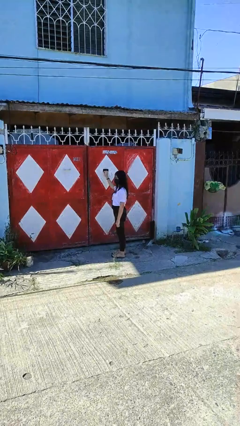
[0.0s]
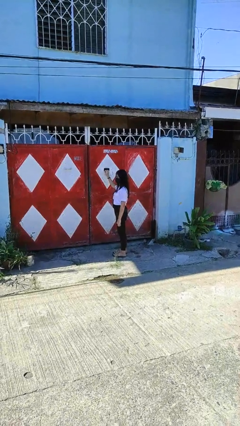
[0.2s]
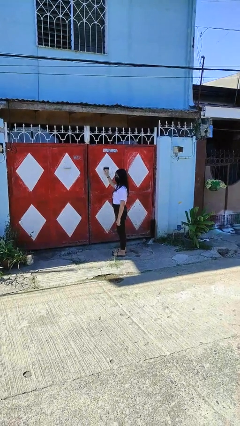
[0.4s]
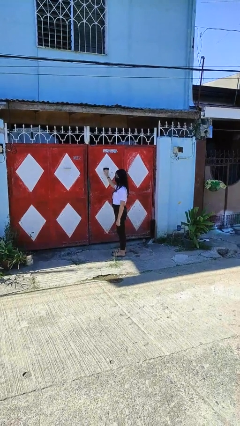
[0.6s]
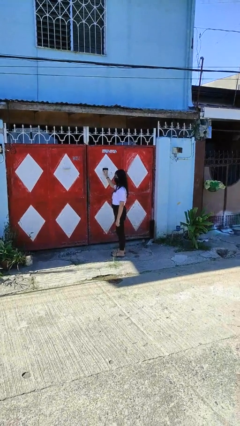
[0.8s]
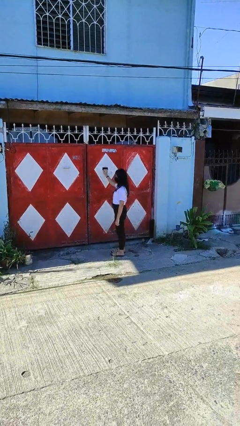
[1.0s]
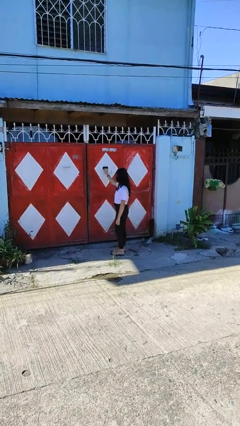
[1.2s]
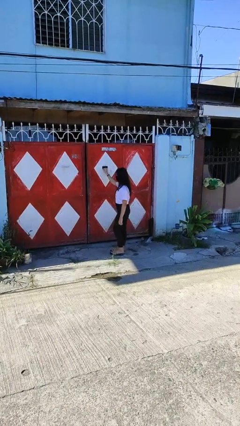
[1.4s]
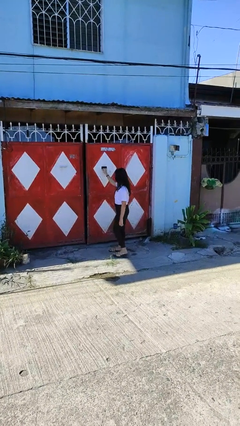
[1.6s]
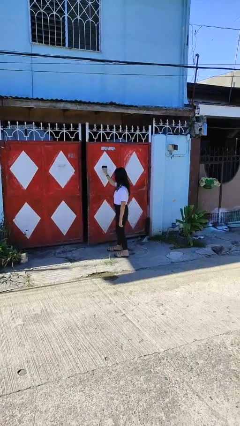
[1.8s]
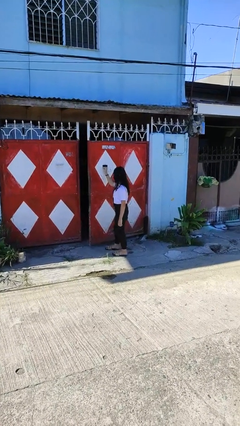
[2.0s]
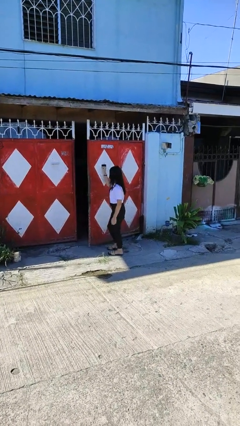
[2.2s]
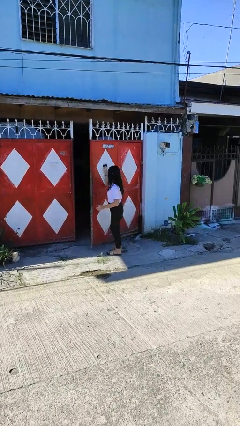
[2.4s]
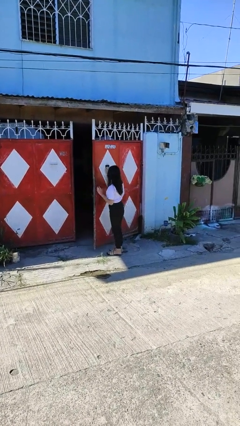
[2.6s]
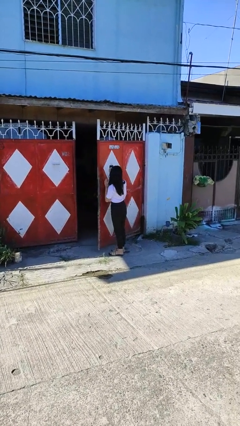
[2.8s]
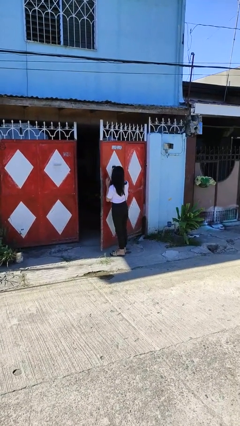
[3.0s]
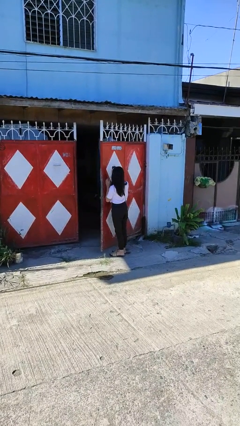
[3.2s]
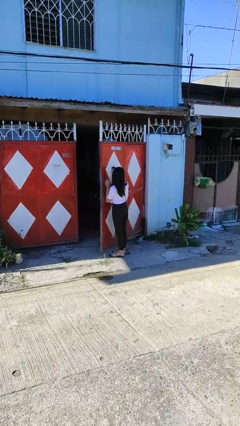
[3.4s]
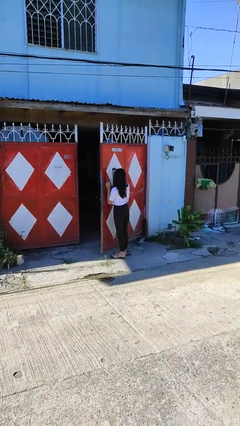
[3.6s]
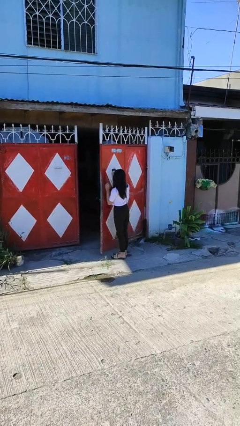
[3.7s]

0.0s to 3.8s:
person opens gate

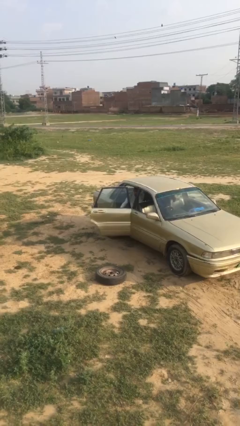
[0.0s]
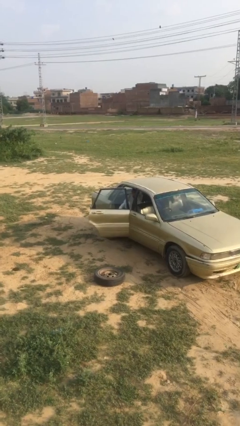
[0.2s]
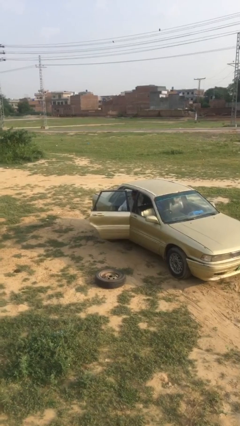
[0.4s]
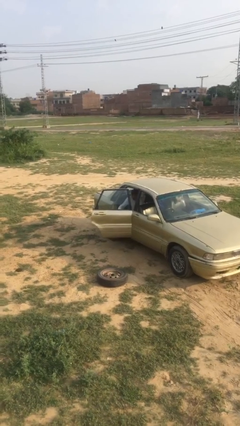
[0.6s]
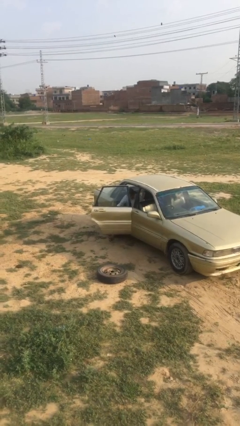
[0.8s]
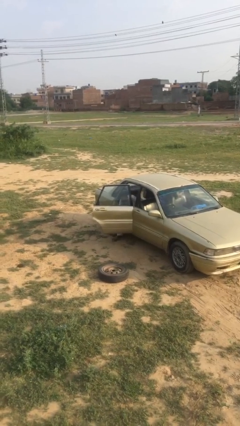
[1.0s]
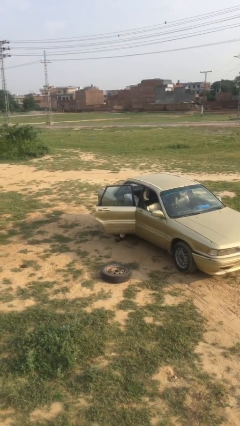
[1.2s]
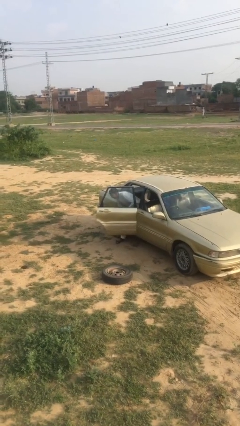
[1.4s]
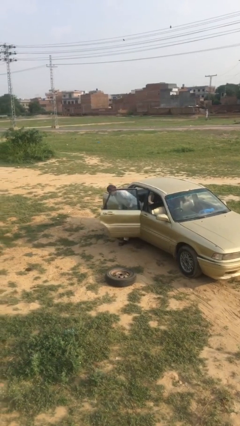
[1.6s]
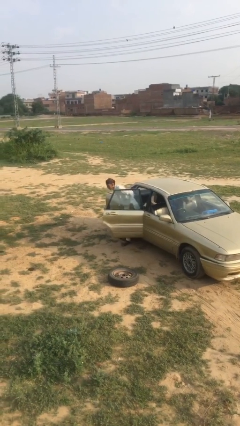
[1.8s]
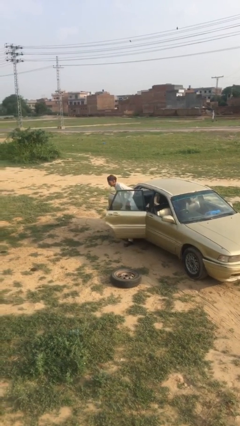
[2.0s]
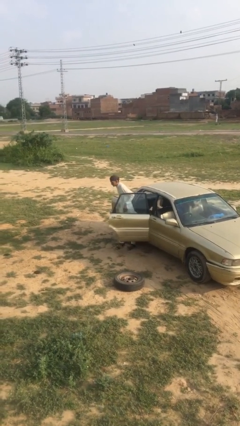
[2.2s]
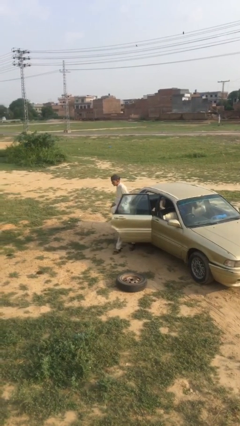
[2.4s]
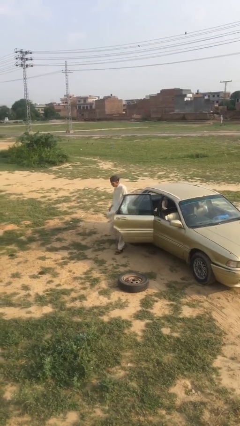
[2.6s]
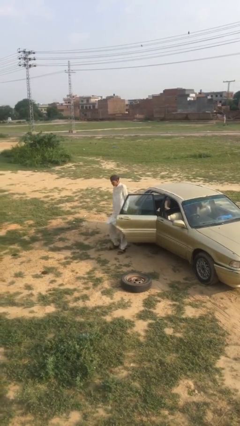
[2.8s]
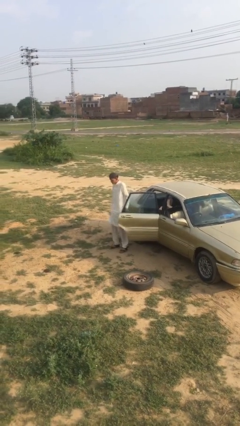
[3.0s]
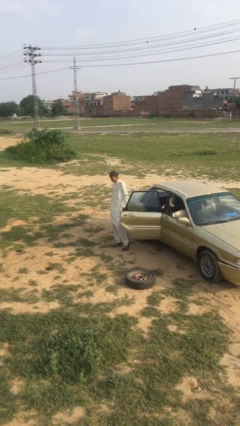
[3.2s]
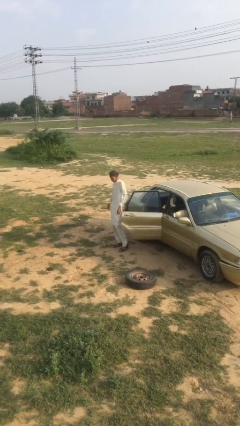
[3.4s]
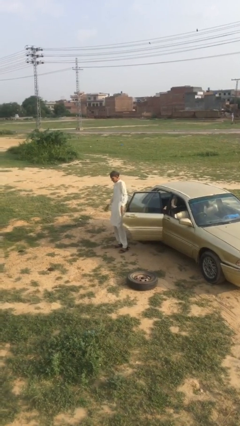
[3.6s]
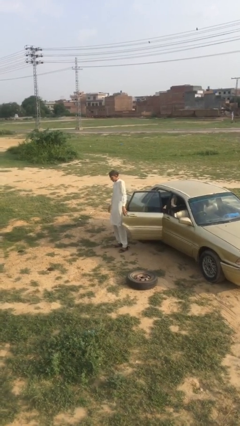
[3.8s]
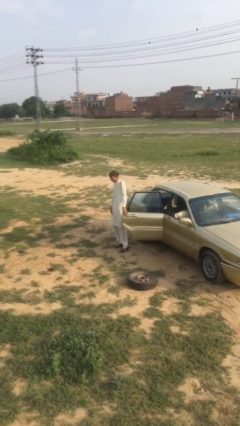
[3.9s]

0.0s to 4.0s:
person exits car

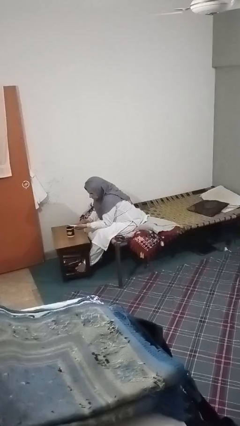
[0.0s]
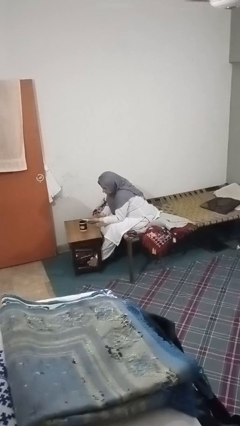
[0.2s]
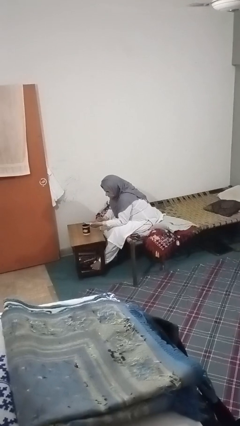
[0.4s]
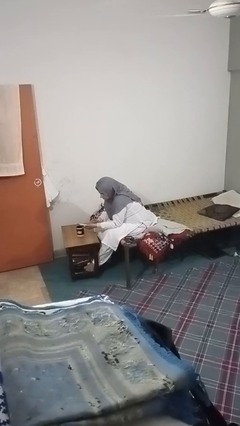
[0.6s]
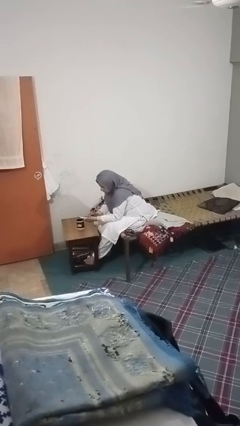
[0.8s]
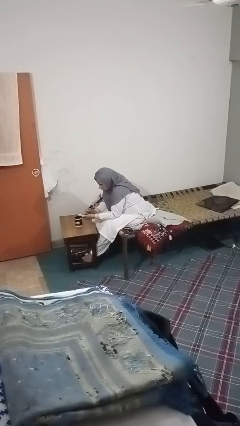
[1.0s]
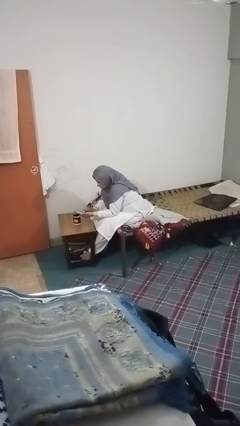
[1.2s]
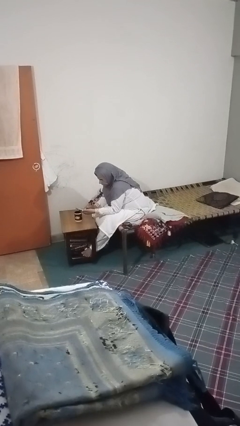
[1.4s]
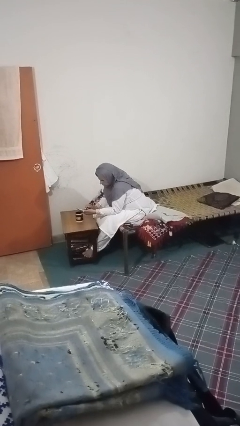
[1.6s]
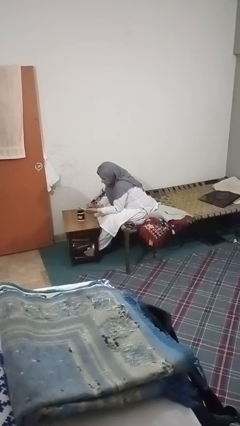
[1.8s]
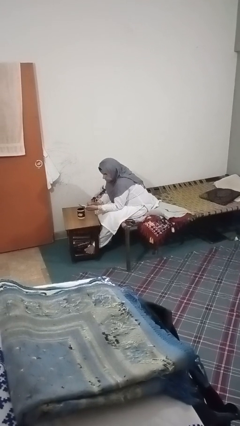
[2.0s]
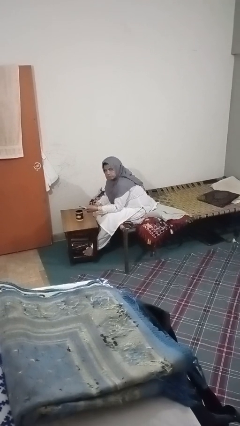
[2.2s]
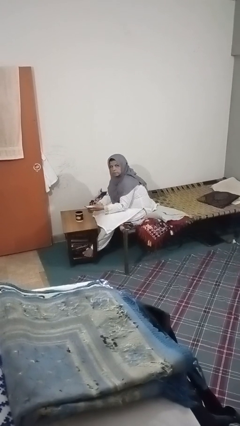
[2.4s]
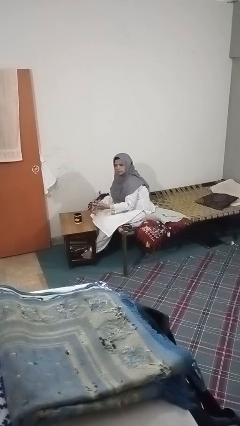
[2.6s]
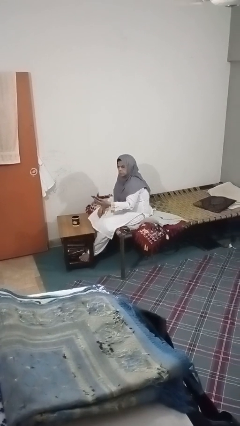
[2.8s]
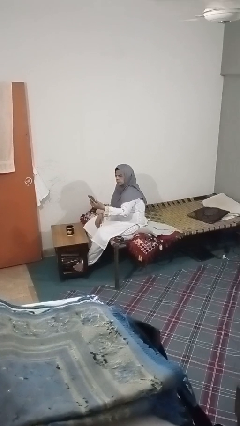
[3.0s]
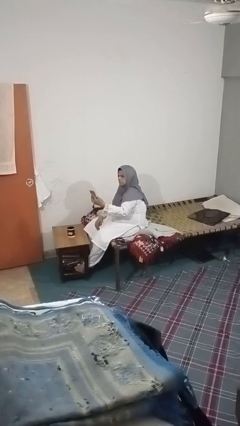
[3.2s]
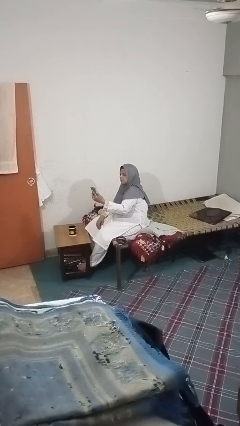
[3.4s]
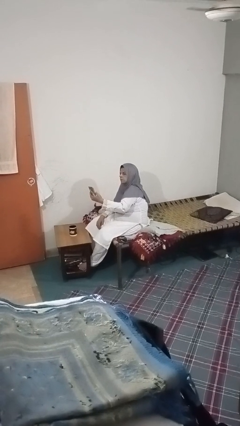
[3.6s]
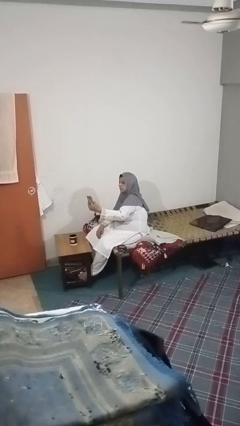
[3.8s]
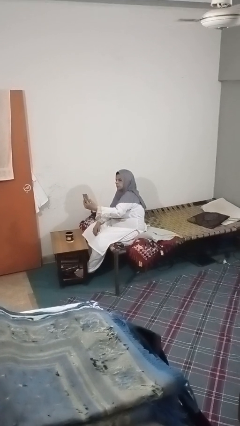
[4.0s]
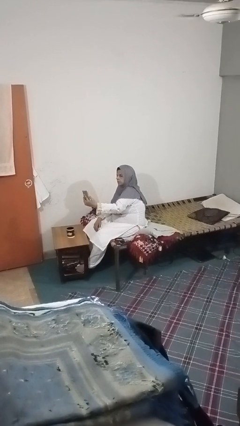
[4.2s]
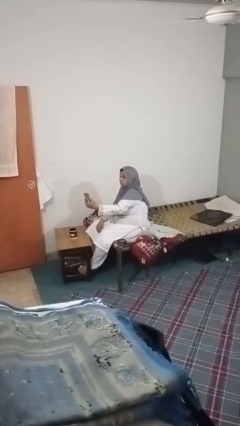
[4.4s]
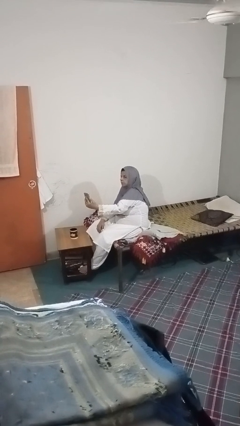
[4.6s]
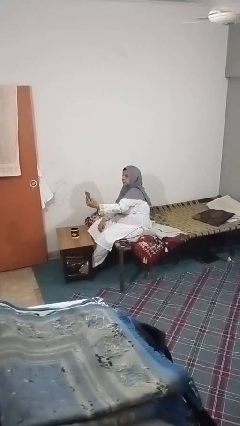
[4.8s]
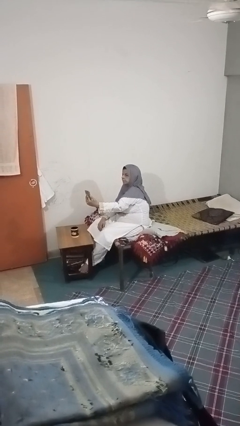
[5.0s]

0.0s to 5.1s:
person takes selfie

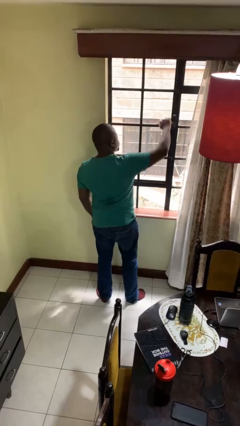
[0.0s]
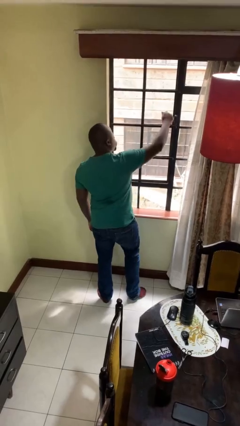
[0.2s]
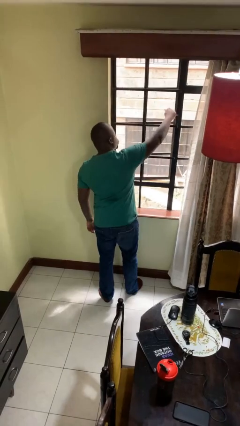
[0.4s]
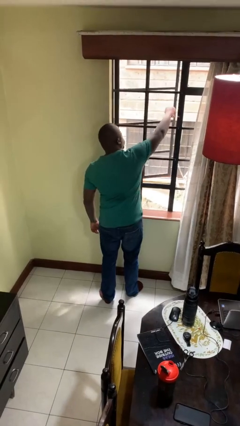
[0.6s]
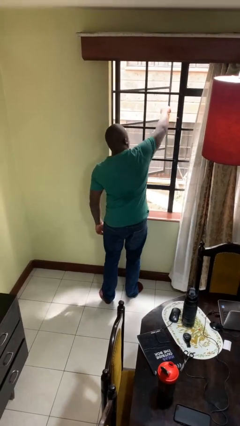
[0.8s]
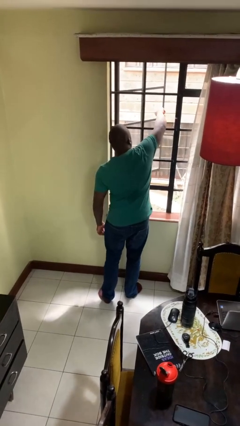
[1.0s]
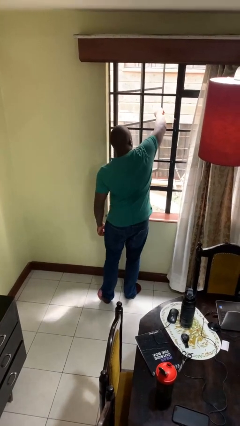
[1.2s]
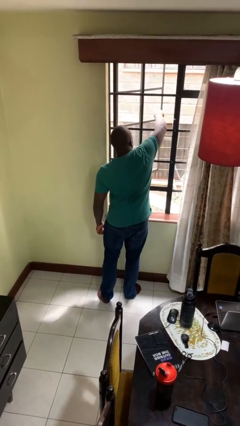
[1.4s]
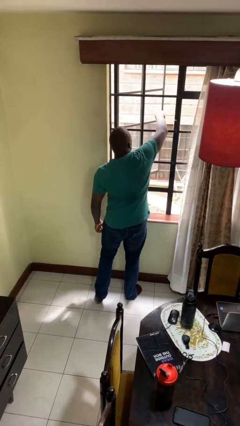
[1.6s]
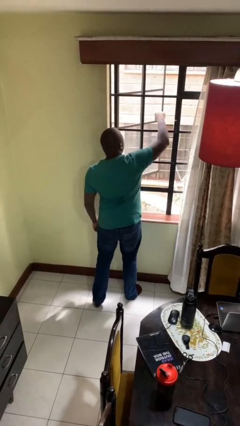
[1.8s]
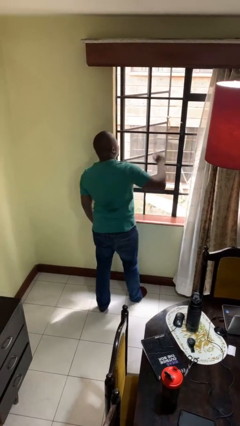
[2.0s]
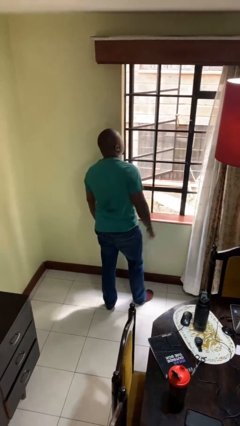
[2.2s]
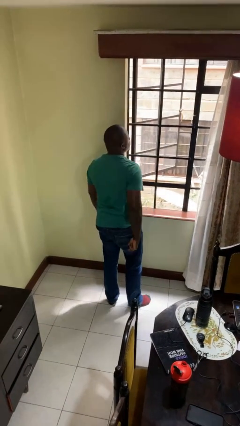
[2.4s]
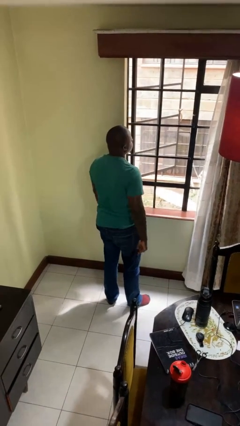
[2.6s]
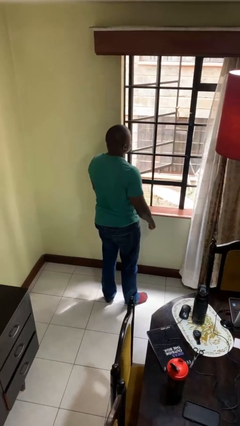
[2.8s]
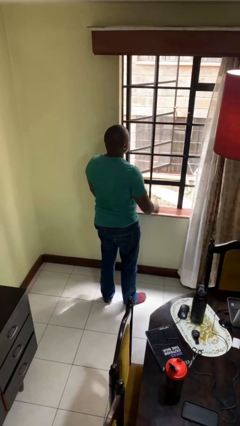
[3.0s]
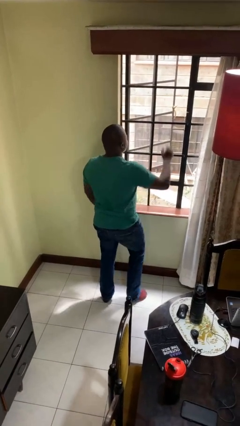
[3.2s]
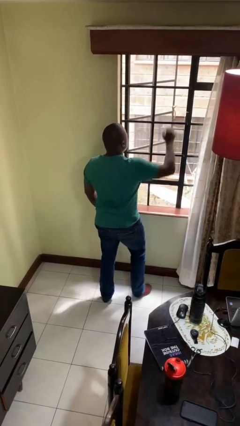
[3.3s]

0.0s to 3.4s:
person opens home window

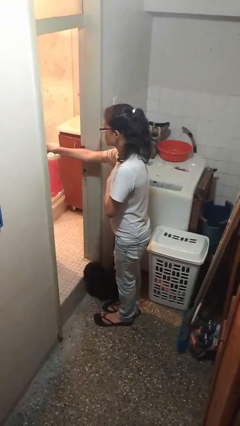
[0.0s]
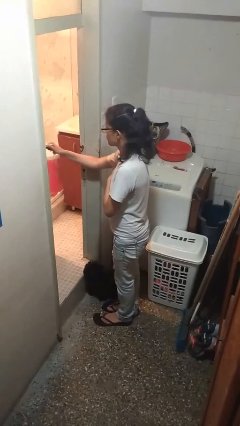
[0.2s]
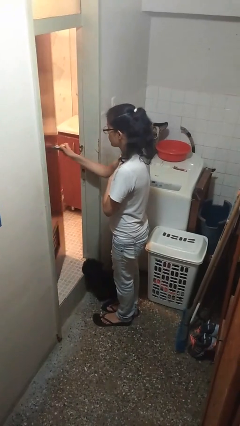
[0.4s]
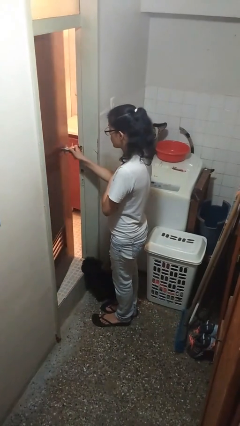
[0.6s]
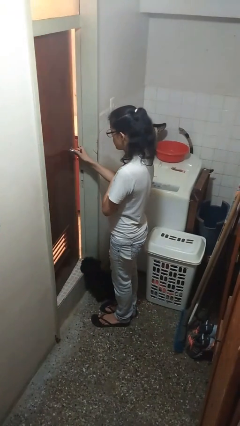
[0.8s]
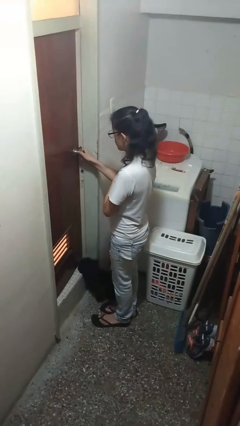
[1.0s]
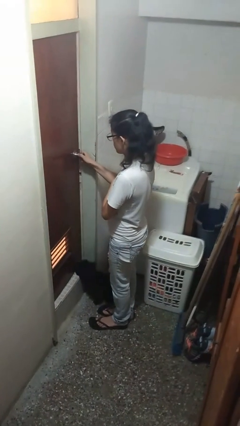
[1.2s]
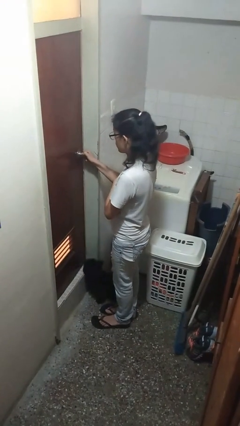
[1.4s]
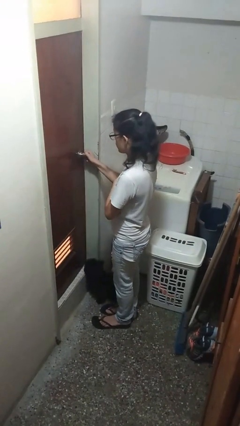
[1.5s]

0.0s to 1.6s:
person closes facility door
